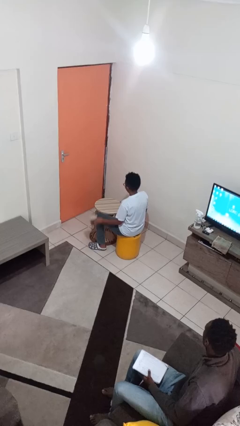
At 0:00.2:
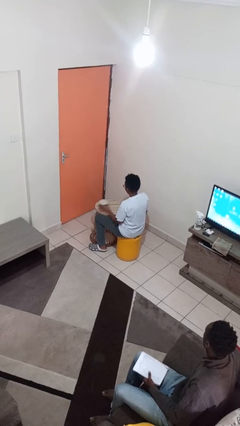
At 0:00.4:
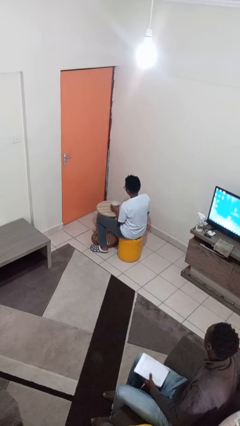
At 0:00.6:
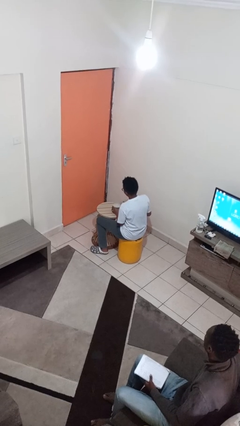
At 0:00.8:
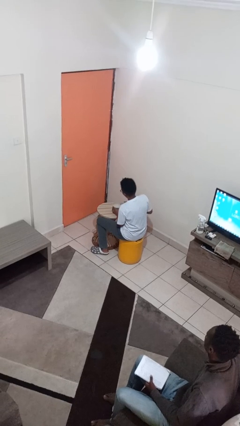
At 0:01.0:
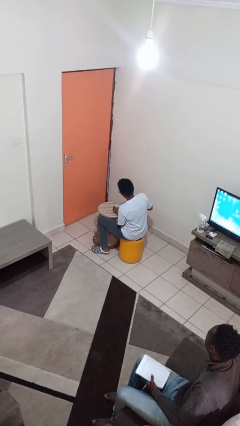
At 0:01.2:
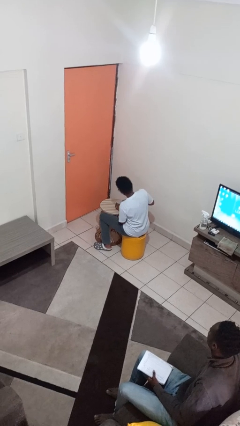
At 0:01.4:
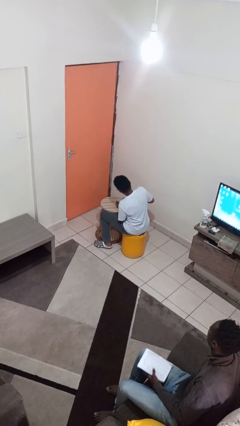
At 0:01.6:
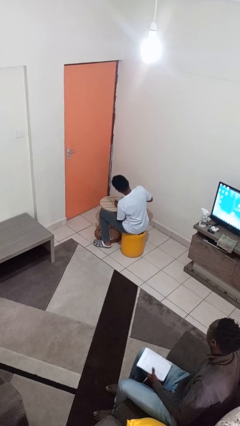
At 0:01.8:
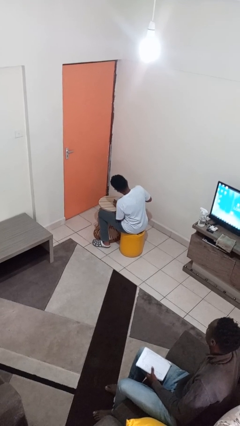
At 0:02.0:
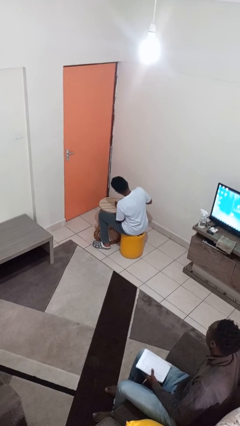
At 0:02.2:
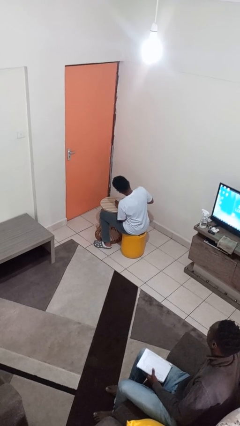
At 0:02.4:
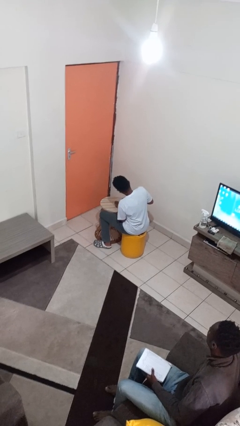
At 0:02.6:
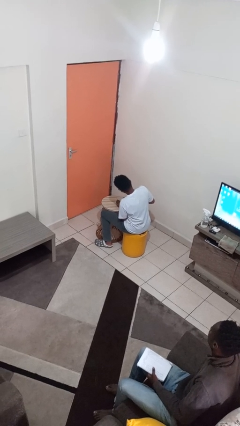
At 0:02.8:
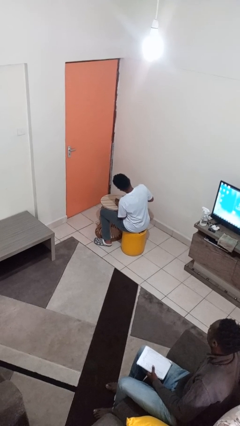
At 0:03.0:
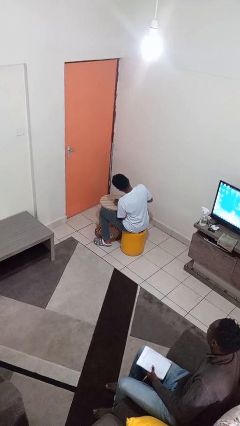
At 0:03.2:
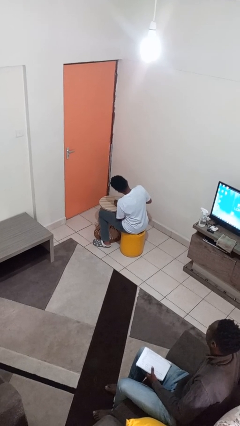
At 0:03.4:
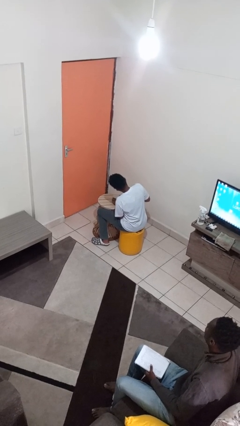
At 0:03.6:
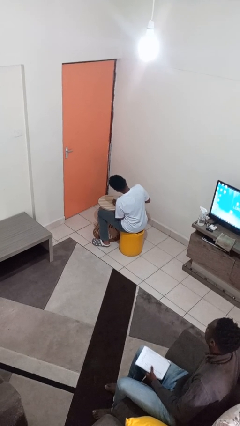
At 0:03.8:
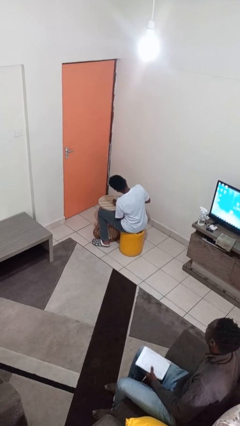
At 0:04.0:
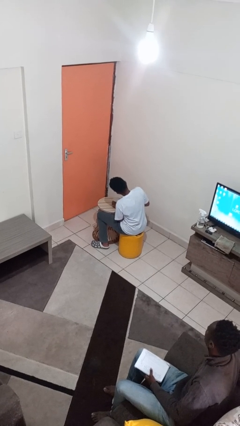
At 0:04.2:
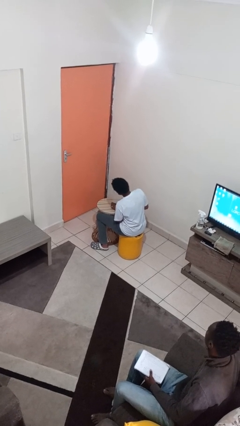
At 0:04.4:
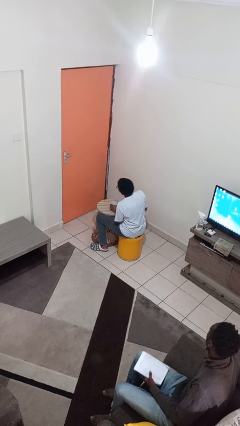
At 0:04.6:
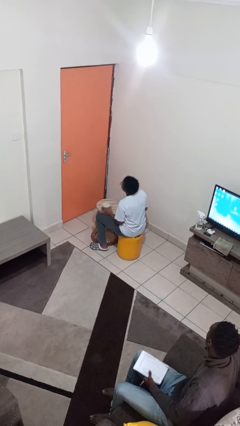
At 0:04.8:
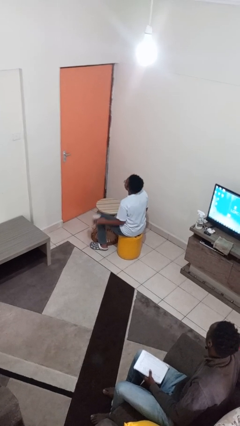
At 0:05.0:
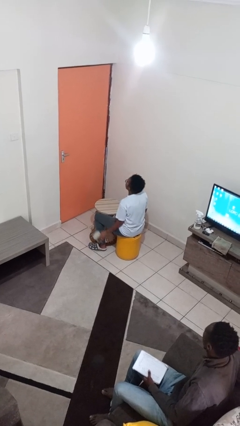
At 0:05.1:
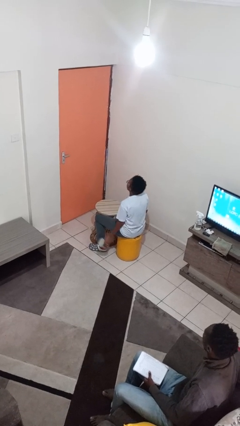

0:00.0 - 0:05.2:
person opens can with can opener

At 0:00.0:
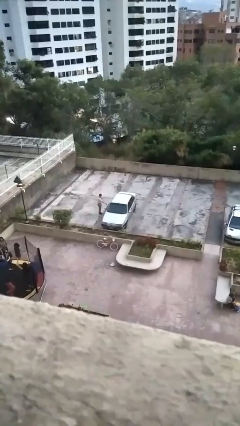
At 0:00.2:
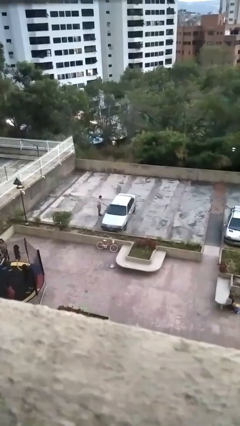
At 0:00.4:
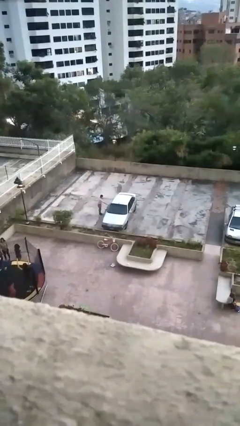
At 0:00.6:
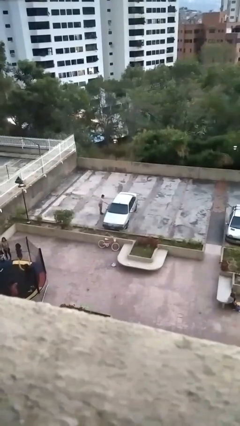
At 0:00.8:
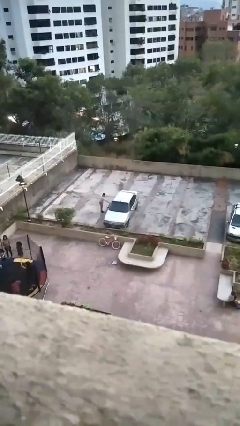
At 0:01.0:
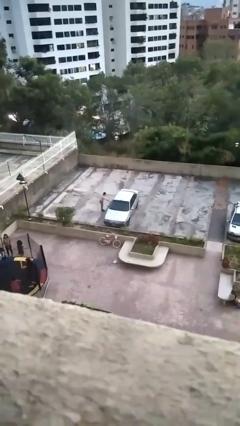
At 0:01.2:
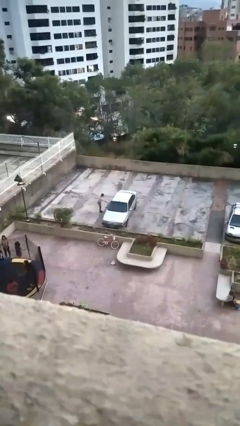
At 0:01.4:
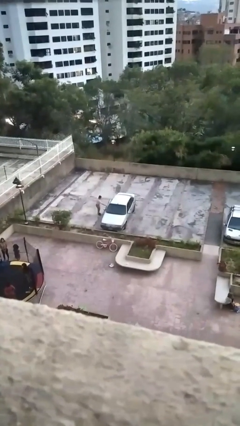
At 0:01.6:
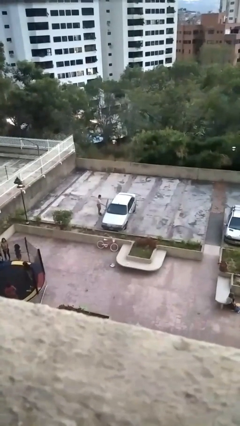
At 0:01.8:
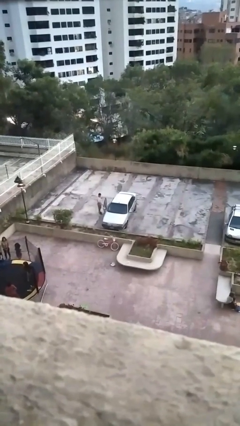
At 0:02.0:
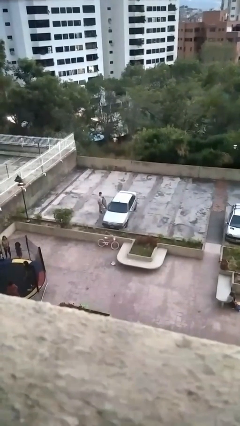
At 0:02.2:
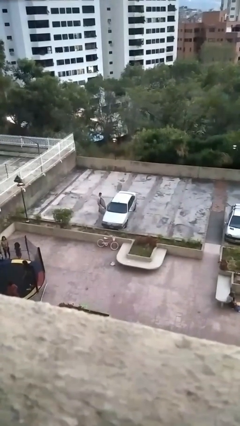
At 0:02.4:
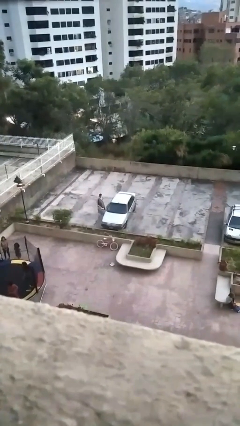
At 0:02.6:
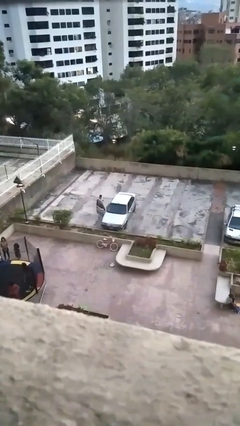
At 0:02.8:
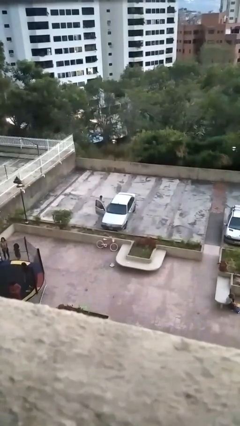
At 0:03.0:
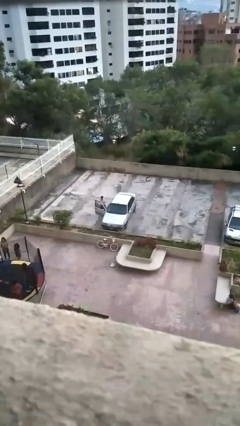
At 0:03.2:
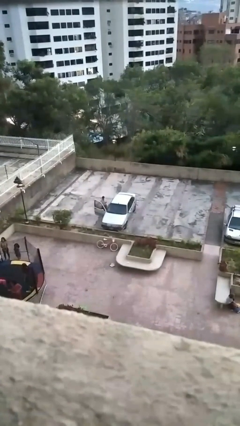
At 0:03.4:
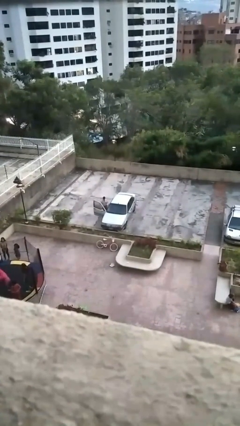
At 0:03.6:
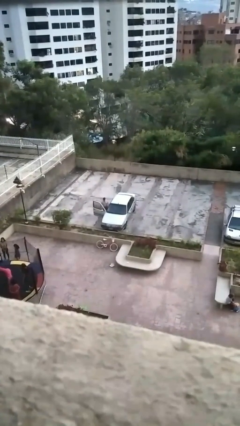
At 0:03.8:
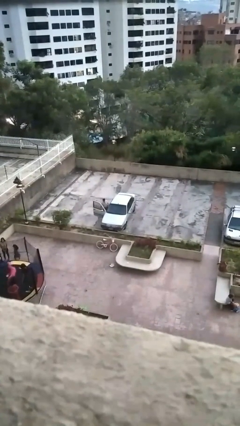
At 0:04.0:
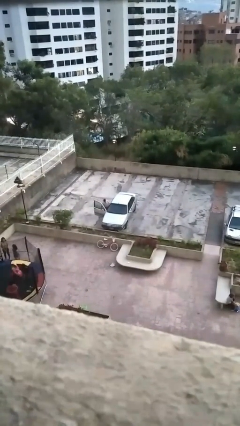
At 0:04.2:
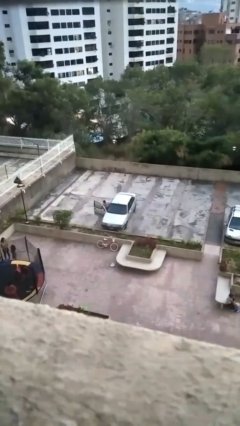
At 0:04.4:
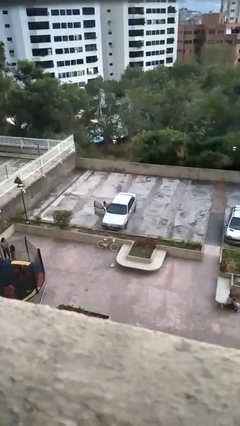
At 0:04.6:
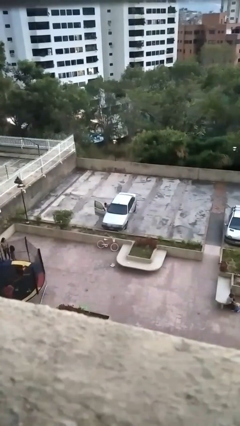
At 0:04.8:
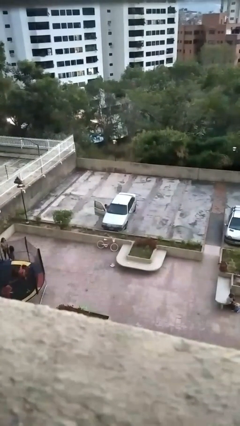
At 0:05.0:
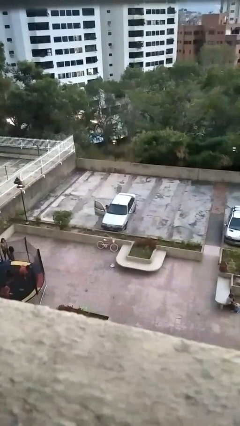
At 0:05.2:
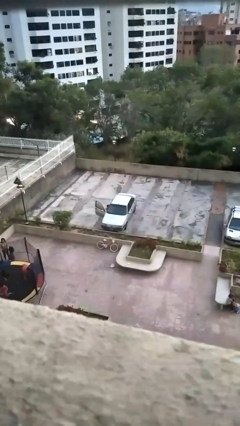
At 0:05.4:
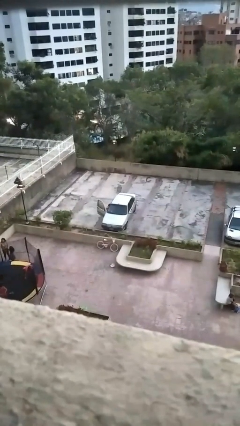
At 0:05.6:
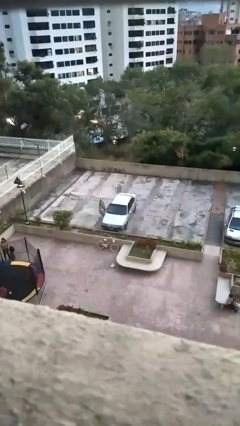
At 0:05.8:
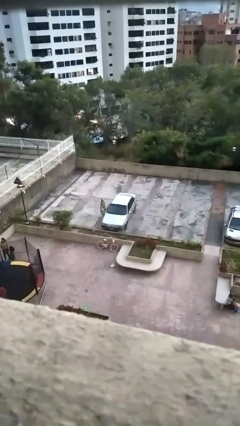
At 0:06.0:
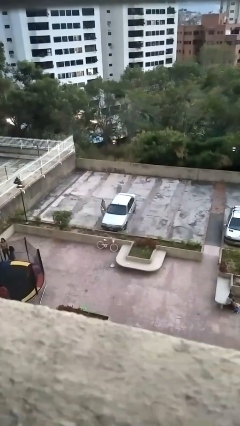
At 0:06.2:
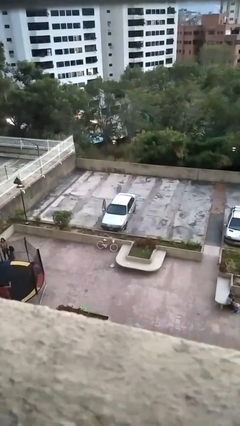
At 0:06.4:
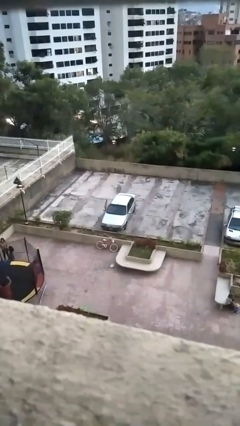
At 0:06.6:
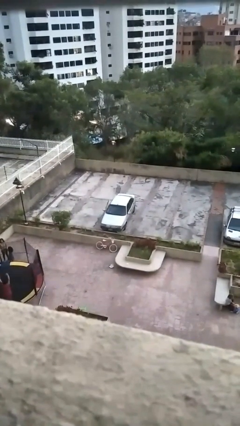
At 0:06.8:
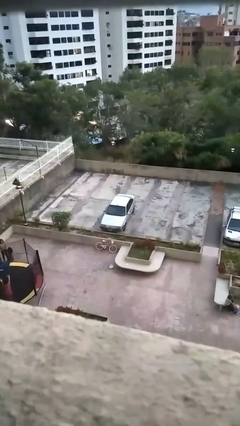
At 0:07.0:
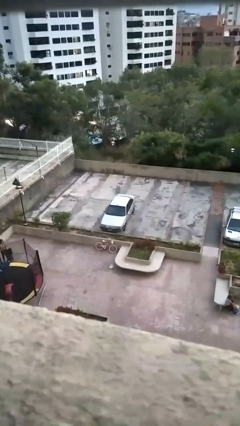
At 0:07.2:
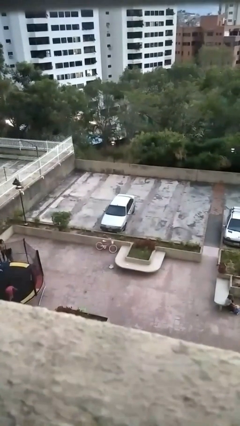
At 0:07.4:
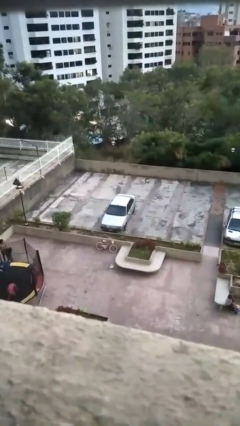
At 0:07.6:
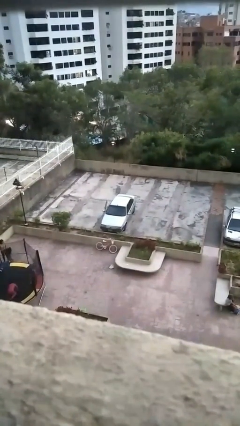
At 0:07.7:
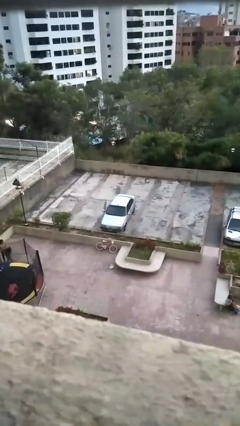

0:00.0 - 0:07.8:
car picks up person

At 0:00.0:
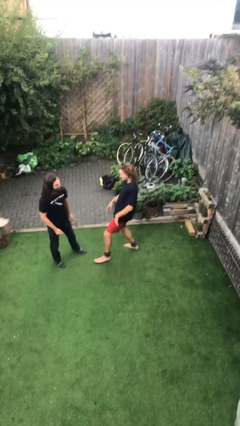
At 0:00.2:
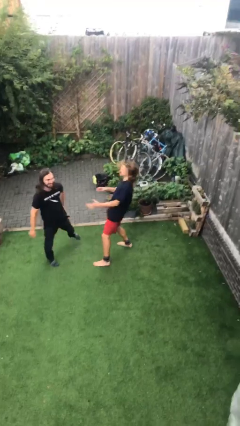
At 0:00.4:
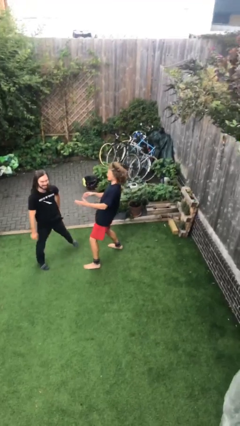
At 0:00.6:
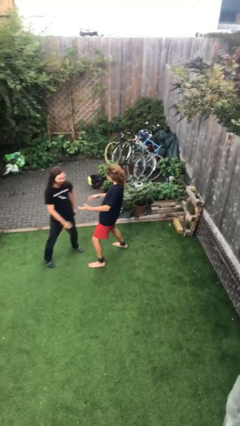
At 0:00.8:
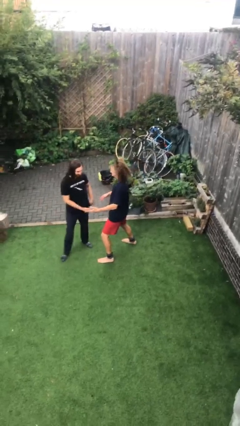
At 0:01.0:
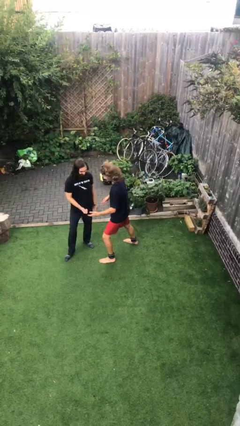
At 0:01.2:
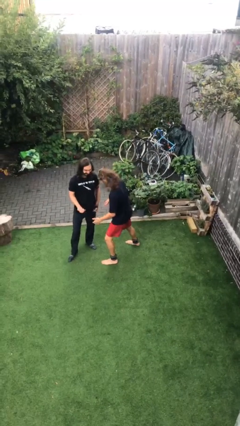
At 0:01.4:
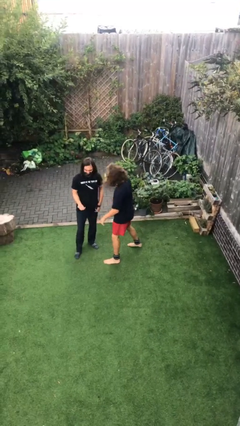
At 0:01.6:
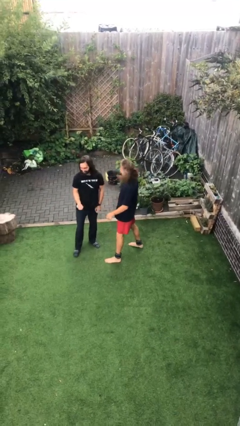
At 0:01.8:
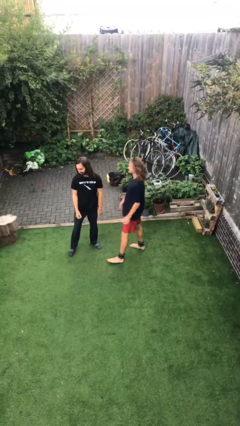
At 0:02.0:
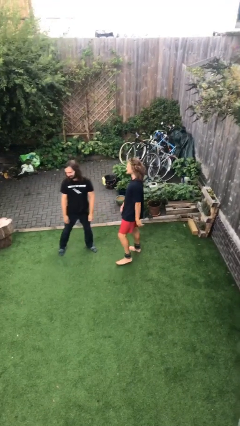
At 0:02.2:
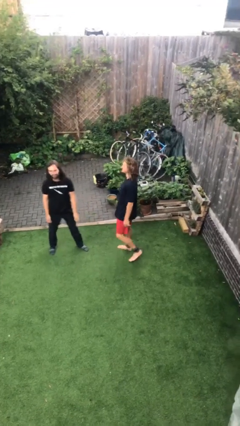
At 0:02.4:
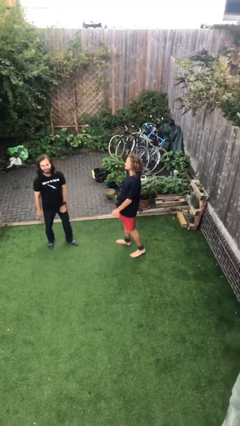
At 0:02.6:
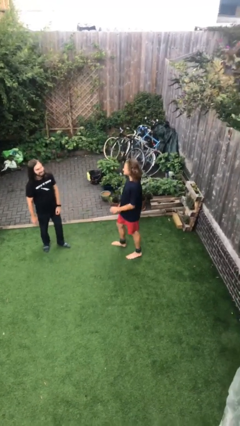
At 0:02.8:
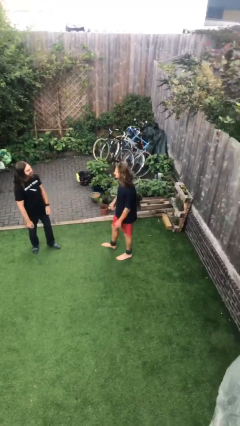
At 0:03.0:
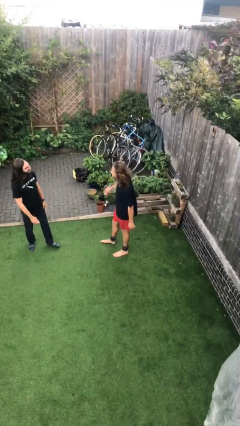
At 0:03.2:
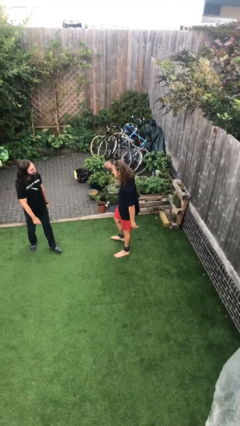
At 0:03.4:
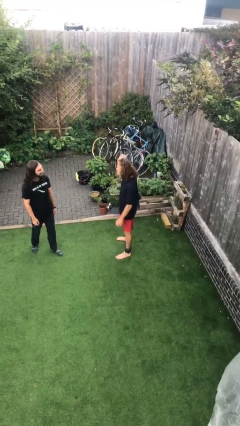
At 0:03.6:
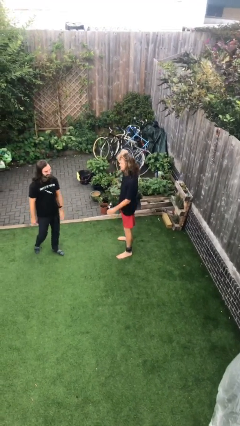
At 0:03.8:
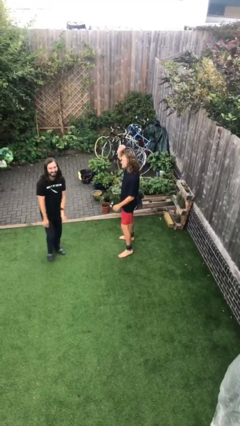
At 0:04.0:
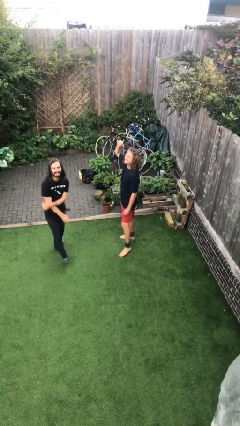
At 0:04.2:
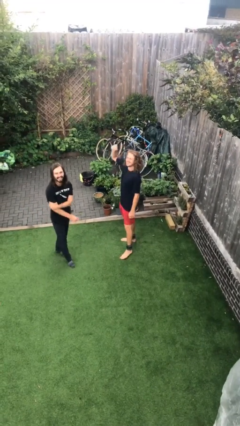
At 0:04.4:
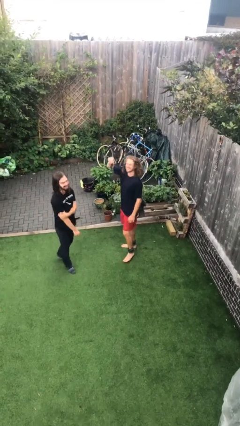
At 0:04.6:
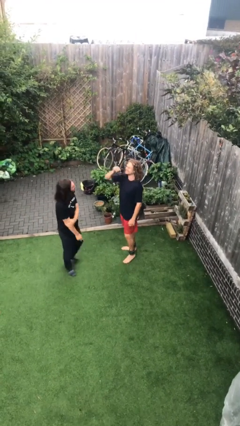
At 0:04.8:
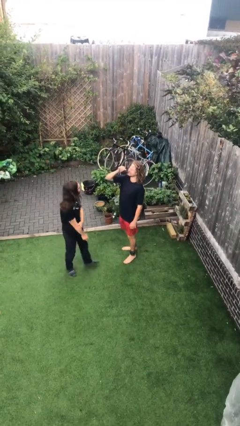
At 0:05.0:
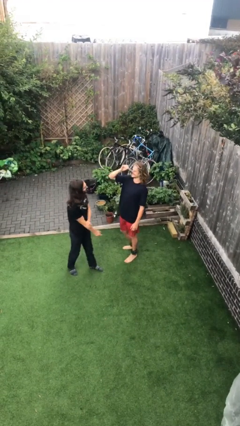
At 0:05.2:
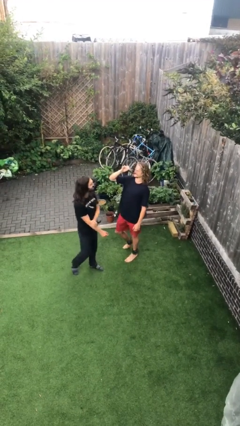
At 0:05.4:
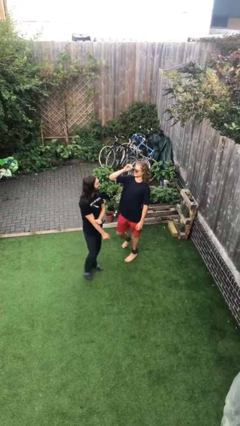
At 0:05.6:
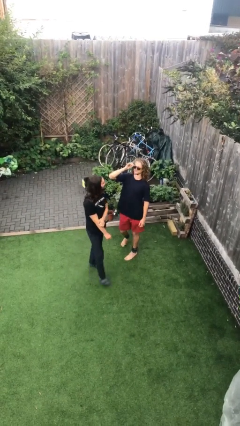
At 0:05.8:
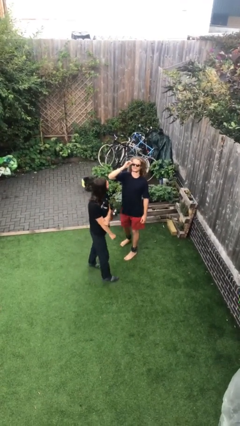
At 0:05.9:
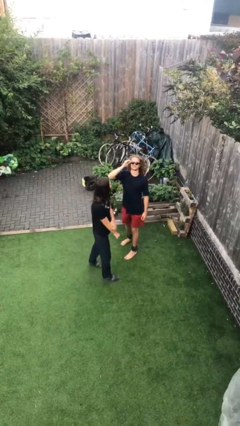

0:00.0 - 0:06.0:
person talks to person
